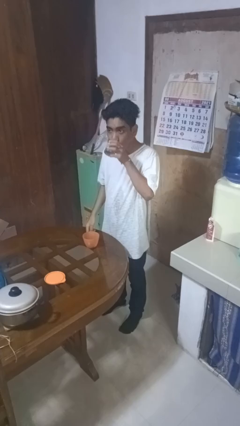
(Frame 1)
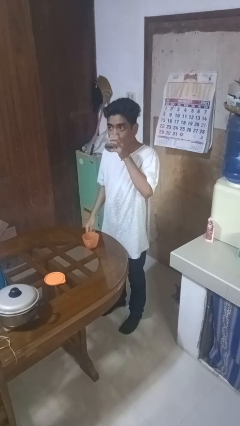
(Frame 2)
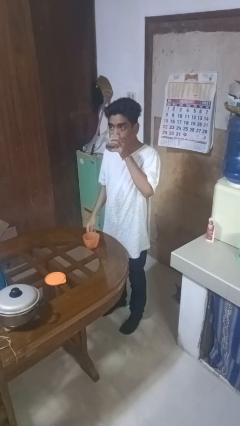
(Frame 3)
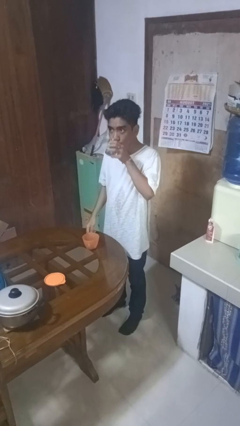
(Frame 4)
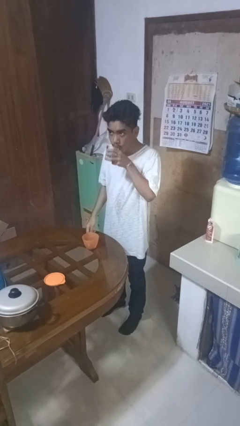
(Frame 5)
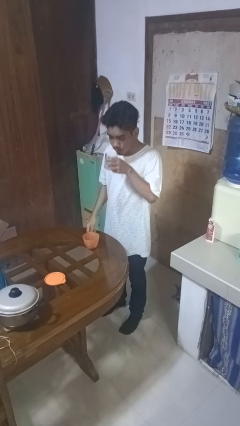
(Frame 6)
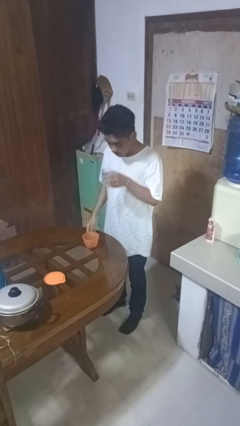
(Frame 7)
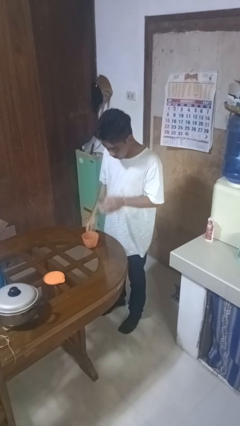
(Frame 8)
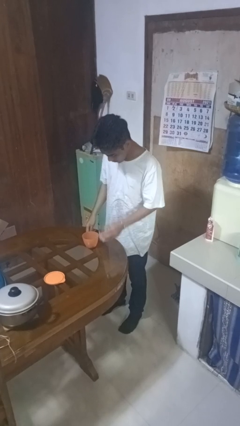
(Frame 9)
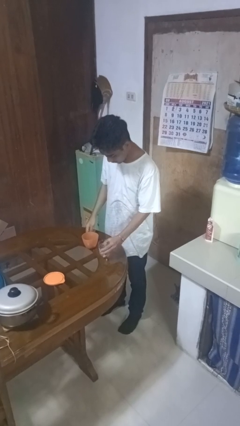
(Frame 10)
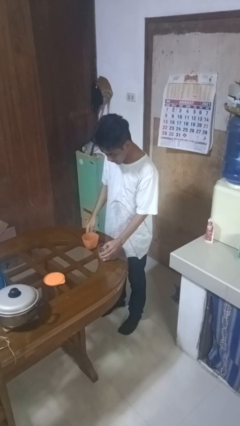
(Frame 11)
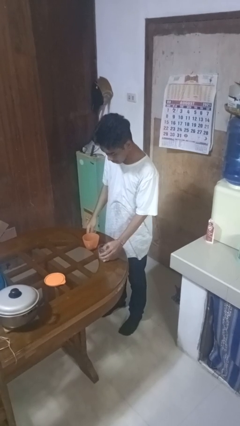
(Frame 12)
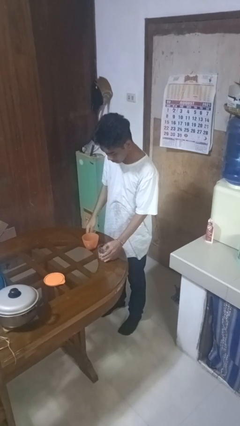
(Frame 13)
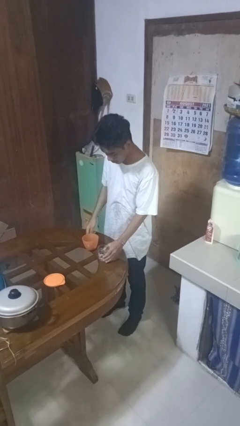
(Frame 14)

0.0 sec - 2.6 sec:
person drinks from cup

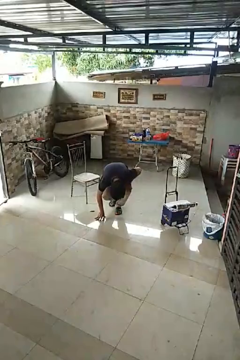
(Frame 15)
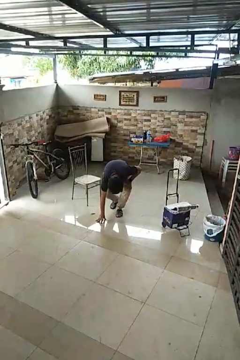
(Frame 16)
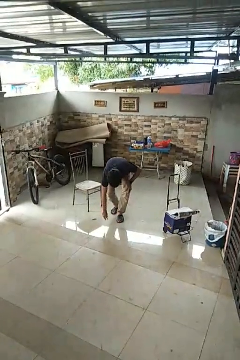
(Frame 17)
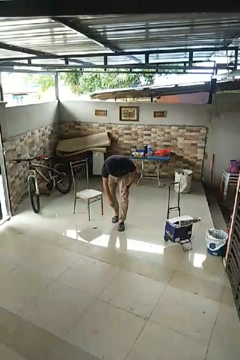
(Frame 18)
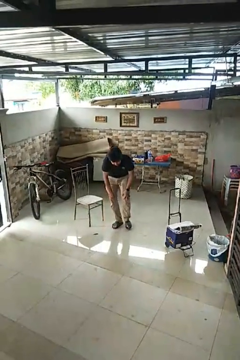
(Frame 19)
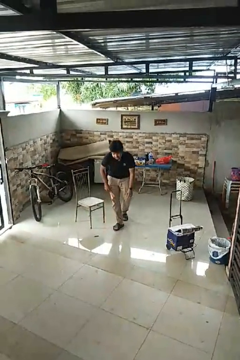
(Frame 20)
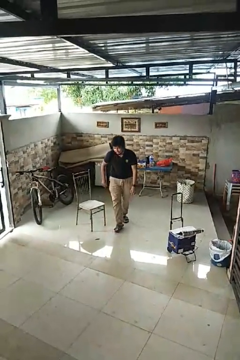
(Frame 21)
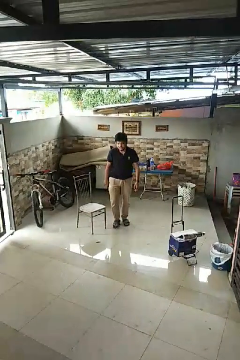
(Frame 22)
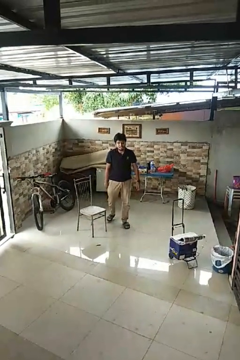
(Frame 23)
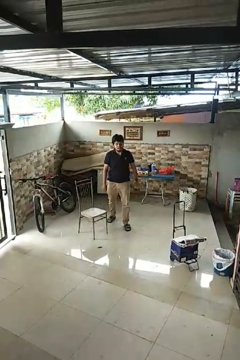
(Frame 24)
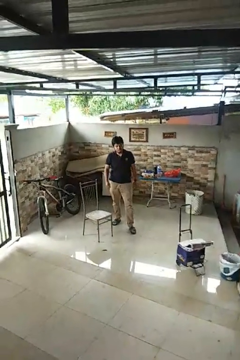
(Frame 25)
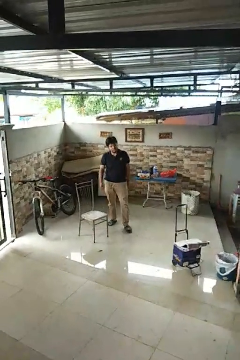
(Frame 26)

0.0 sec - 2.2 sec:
person stands up from floor

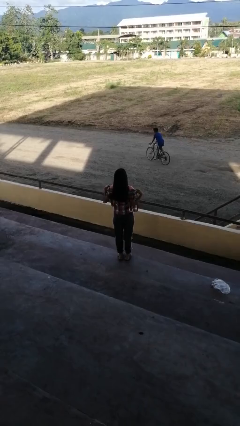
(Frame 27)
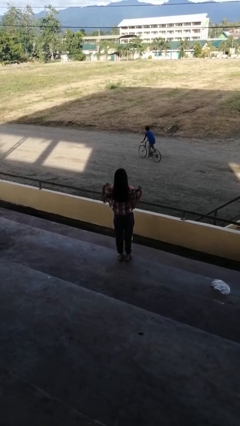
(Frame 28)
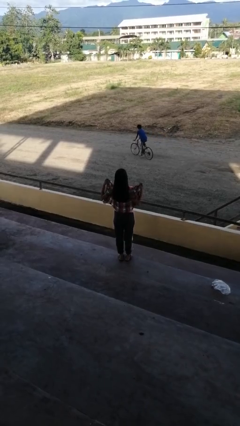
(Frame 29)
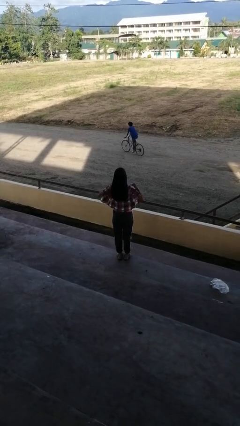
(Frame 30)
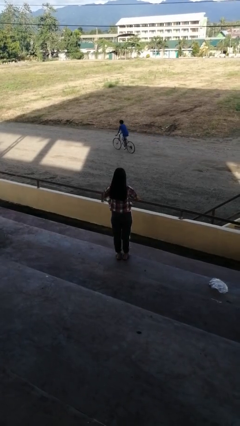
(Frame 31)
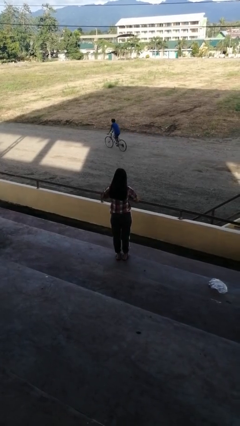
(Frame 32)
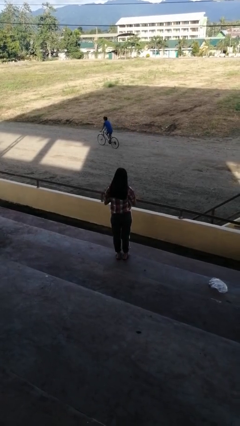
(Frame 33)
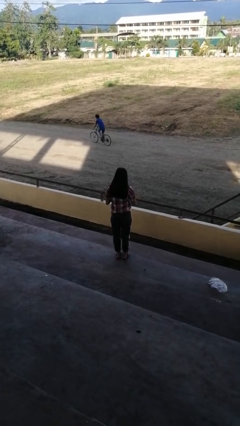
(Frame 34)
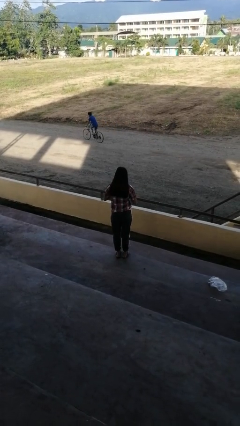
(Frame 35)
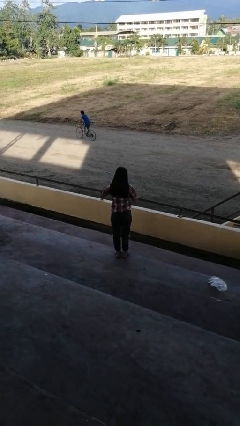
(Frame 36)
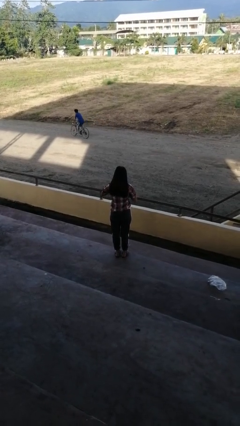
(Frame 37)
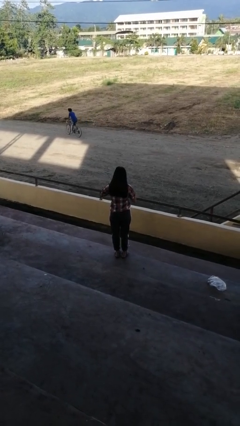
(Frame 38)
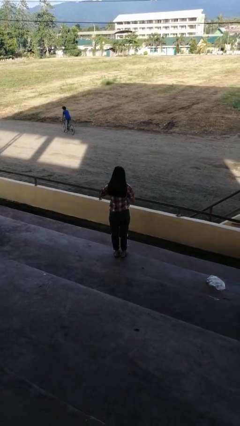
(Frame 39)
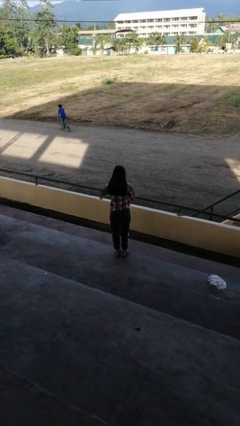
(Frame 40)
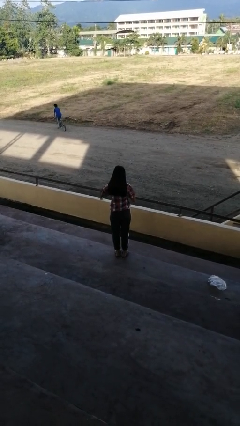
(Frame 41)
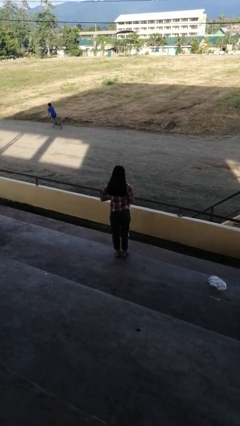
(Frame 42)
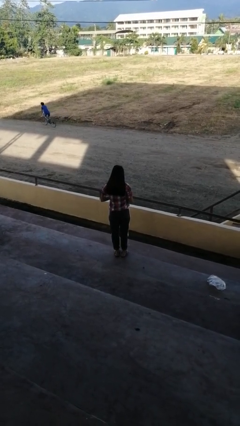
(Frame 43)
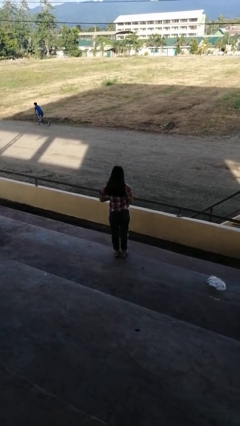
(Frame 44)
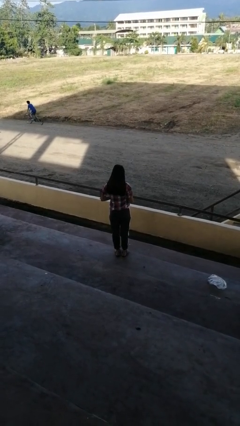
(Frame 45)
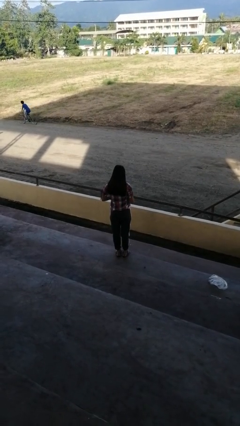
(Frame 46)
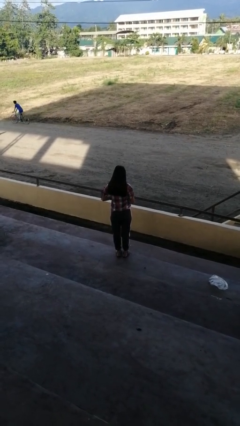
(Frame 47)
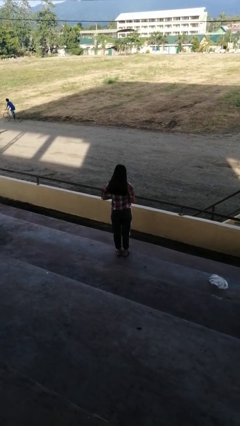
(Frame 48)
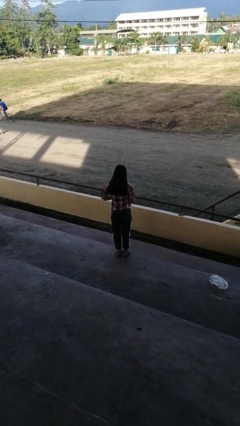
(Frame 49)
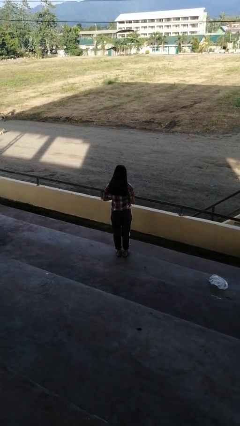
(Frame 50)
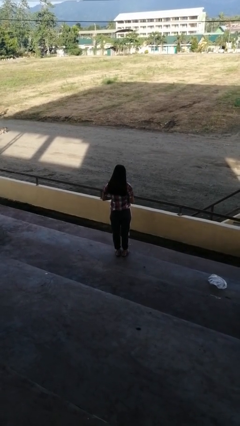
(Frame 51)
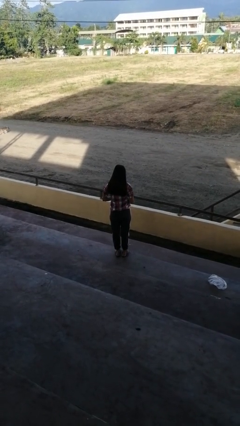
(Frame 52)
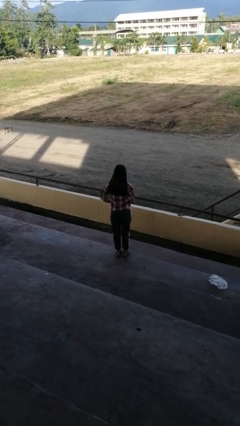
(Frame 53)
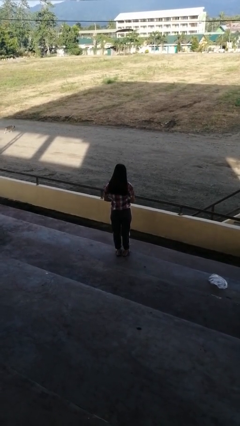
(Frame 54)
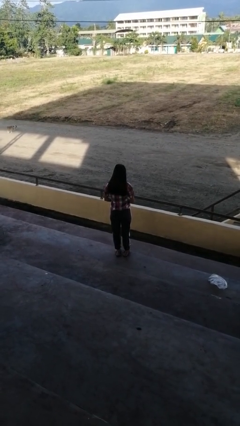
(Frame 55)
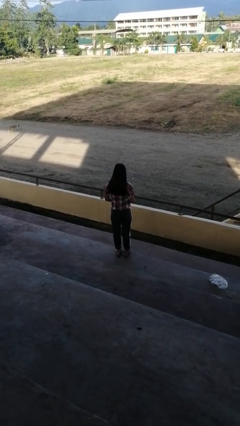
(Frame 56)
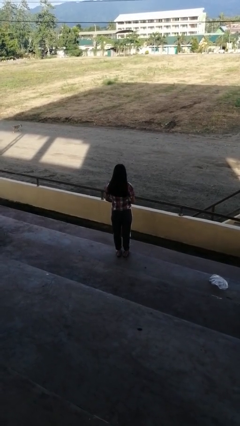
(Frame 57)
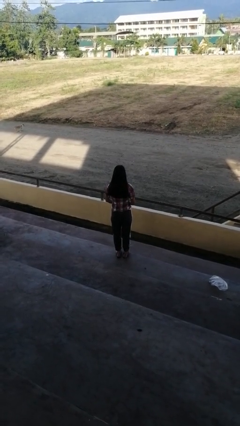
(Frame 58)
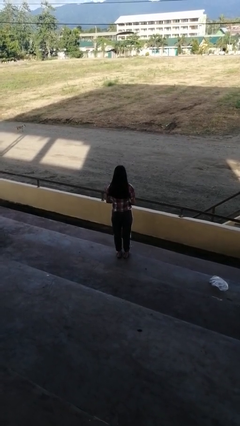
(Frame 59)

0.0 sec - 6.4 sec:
person buttons shirt

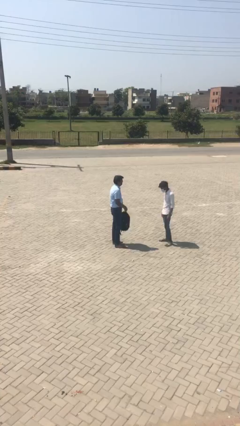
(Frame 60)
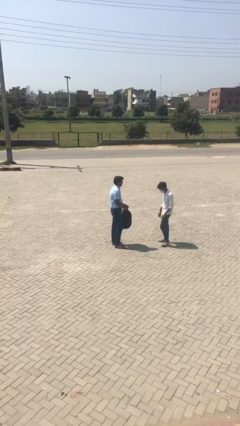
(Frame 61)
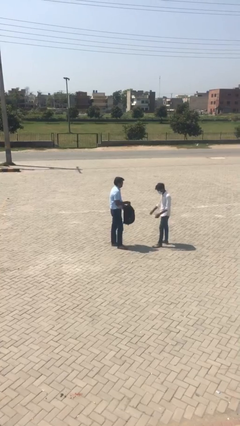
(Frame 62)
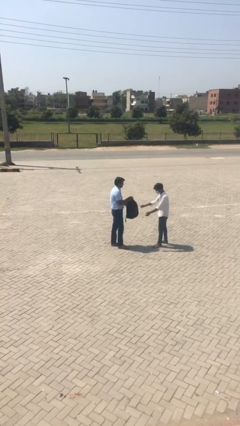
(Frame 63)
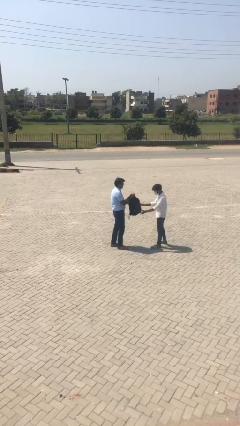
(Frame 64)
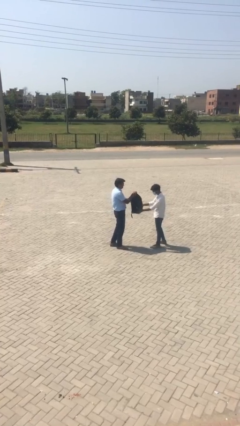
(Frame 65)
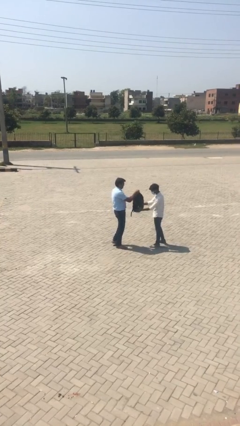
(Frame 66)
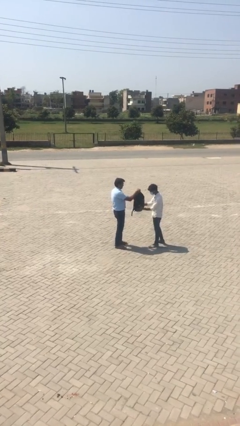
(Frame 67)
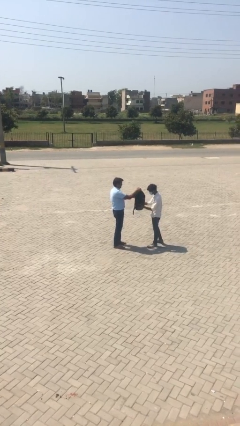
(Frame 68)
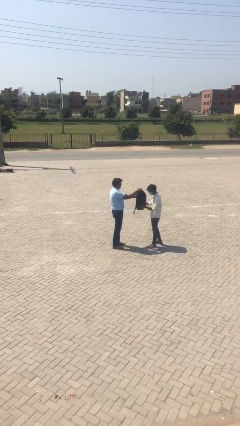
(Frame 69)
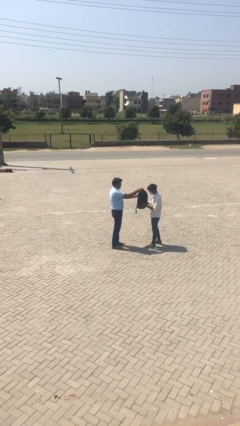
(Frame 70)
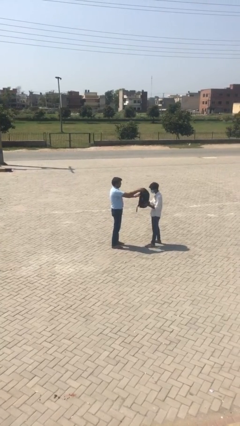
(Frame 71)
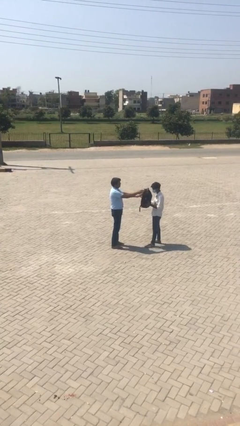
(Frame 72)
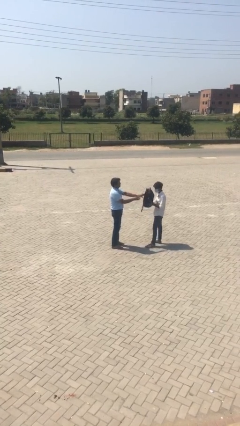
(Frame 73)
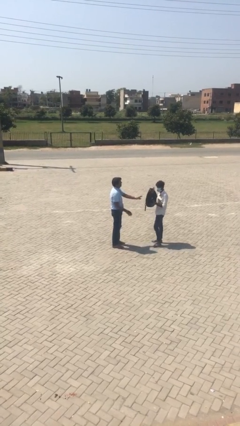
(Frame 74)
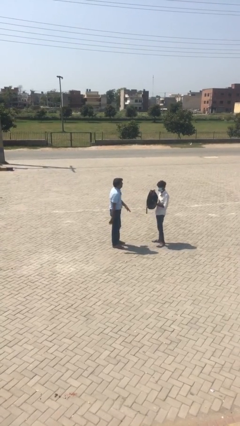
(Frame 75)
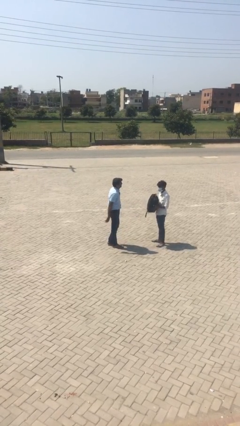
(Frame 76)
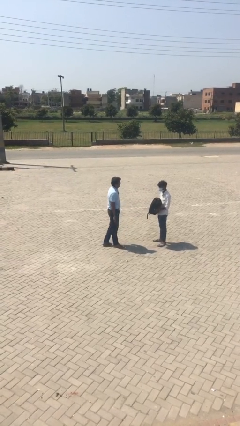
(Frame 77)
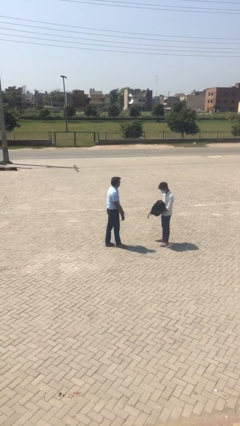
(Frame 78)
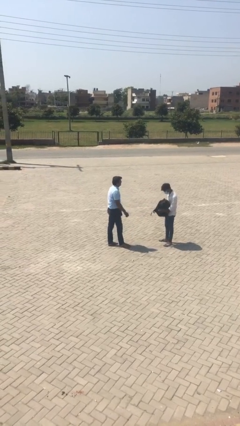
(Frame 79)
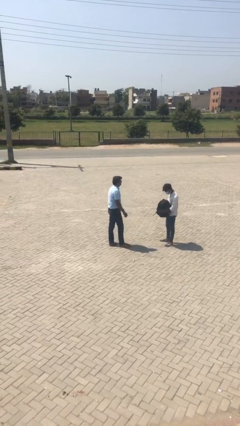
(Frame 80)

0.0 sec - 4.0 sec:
person transfers object to person

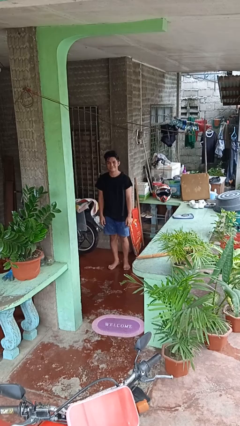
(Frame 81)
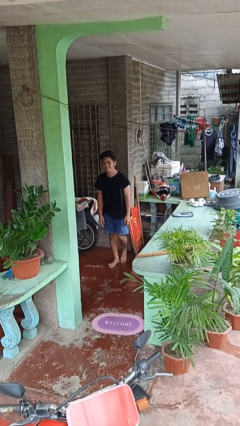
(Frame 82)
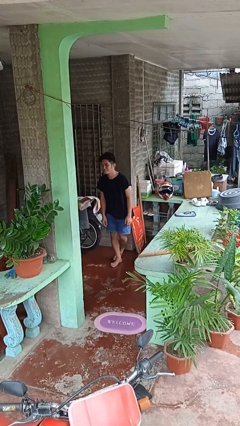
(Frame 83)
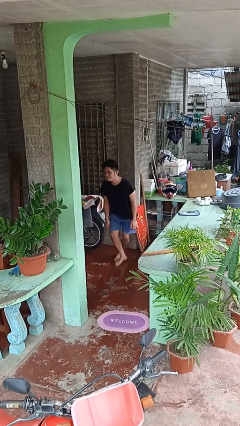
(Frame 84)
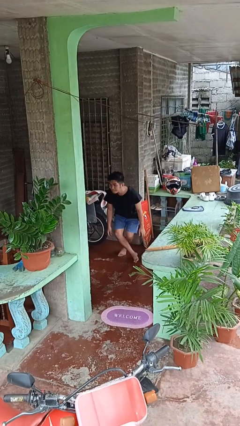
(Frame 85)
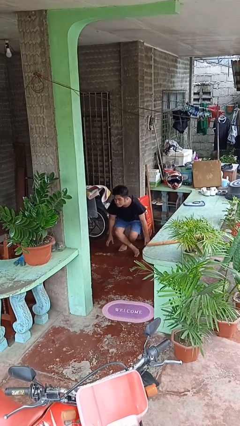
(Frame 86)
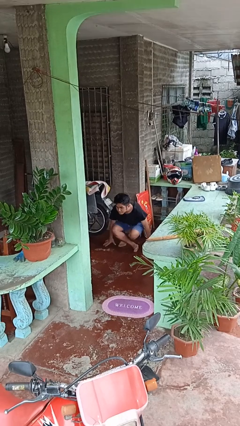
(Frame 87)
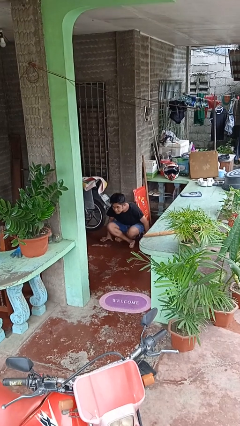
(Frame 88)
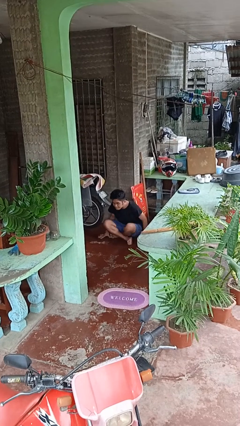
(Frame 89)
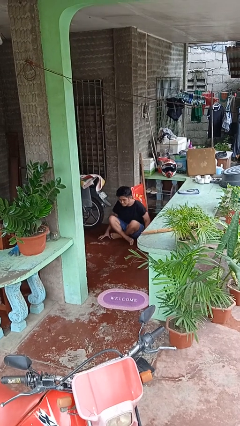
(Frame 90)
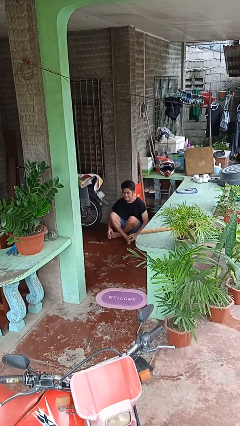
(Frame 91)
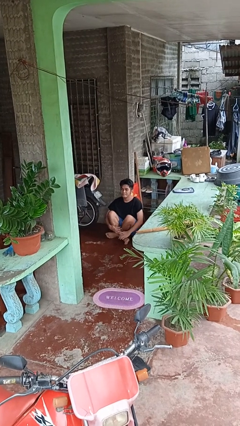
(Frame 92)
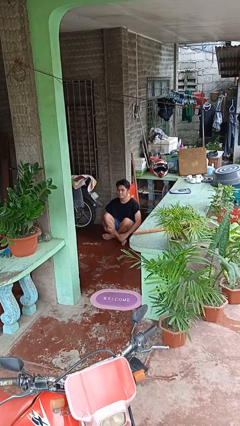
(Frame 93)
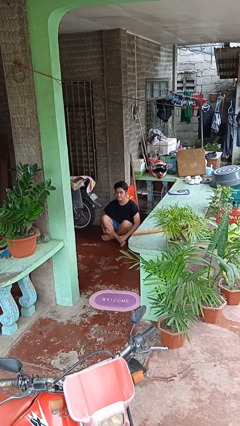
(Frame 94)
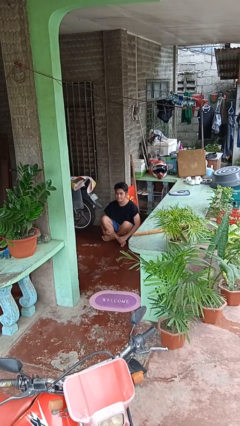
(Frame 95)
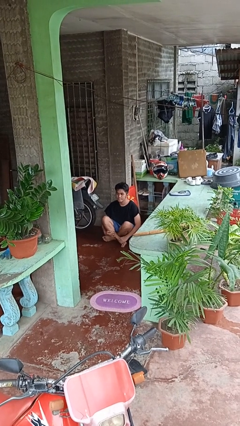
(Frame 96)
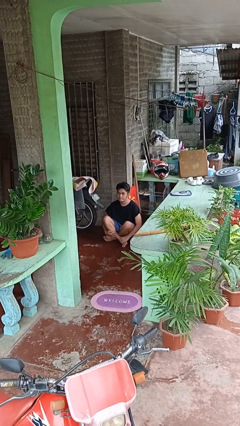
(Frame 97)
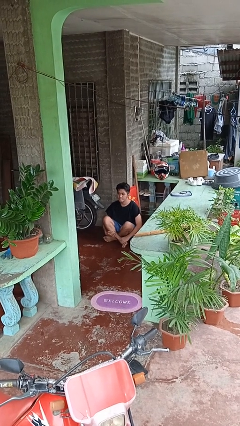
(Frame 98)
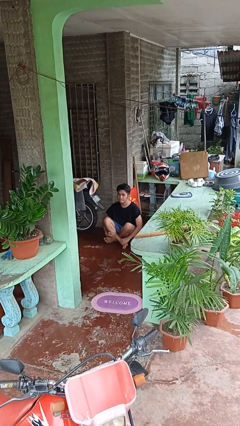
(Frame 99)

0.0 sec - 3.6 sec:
person sits crisscross
